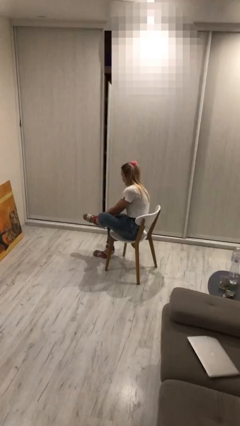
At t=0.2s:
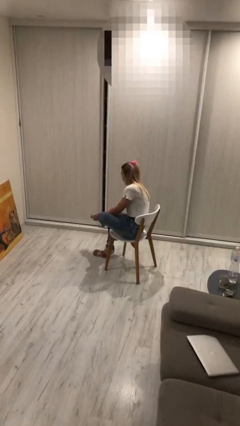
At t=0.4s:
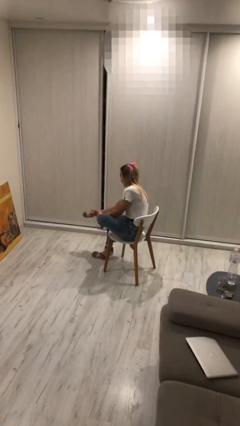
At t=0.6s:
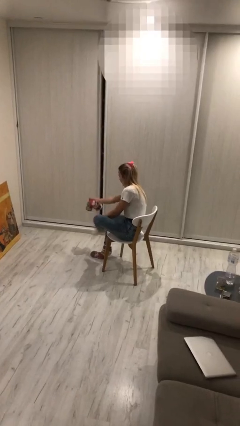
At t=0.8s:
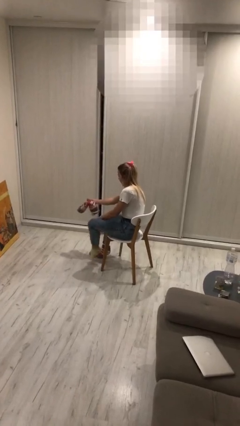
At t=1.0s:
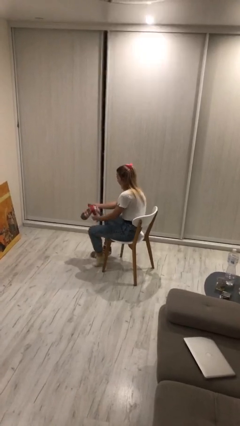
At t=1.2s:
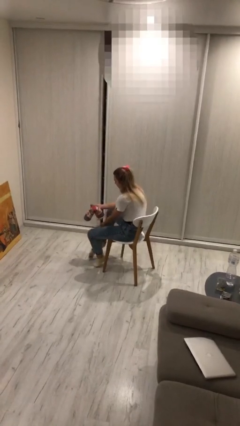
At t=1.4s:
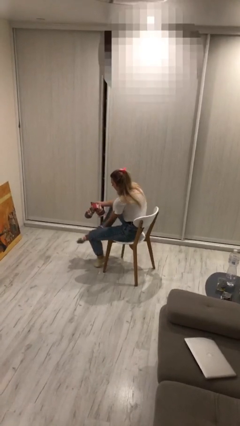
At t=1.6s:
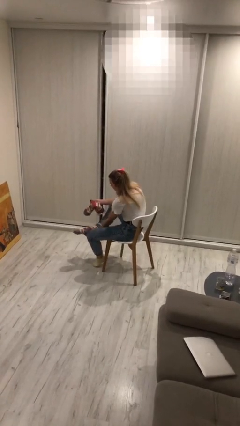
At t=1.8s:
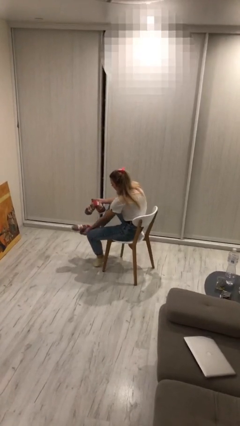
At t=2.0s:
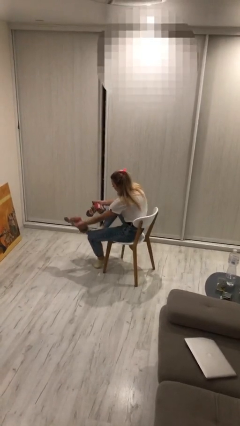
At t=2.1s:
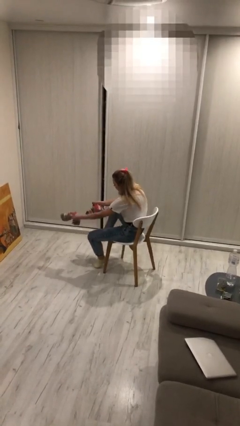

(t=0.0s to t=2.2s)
person takes off socks

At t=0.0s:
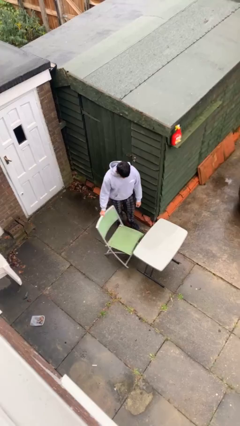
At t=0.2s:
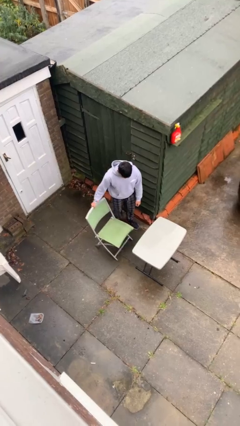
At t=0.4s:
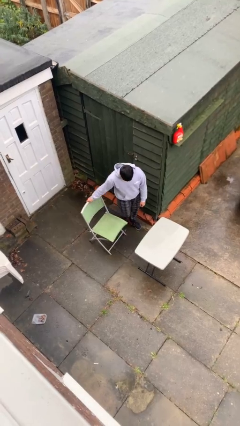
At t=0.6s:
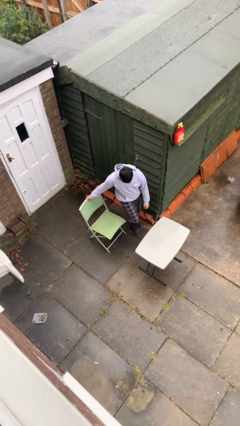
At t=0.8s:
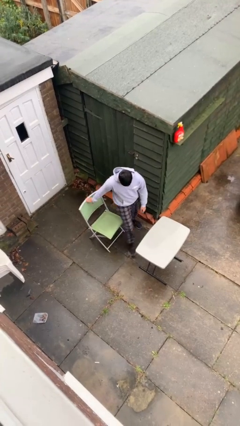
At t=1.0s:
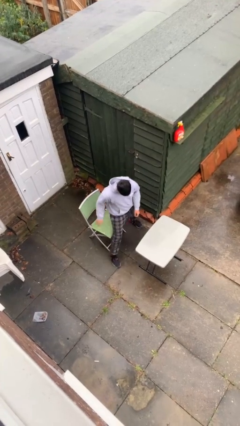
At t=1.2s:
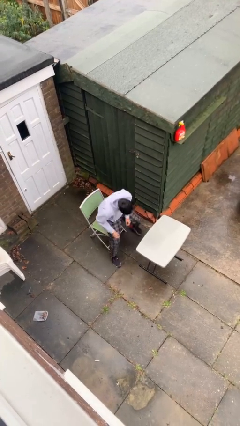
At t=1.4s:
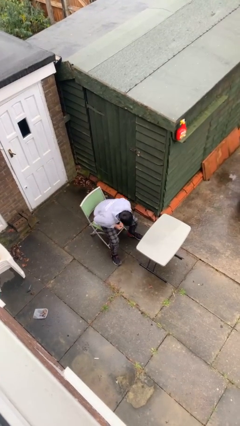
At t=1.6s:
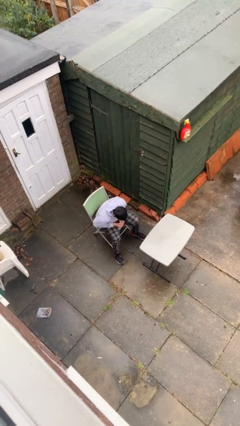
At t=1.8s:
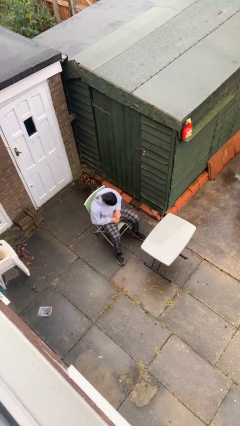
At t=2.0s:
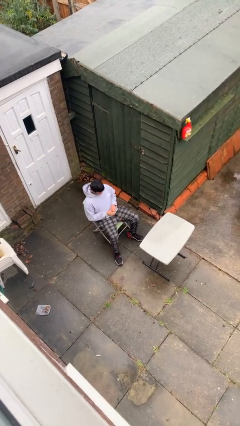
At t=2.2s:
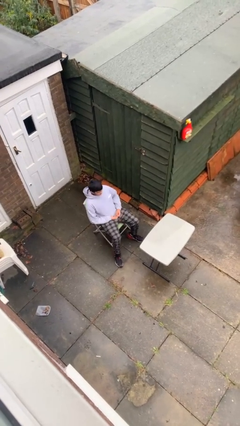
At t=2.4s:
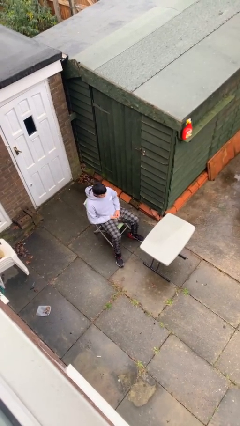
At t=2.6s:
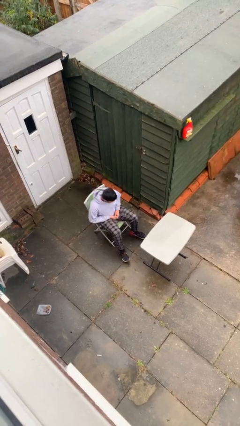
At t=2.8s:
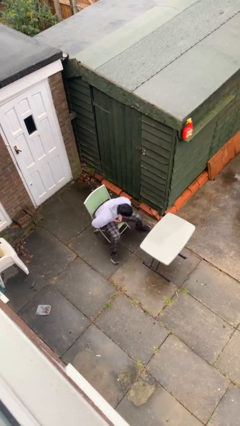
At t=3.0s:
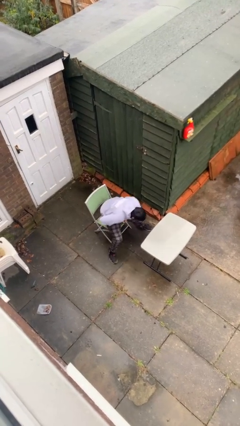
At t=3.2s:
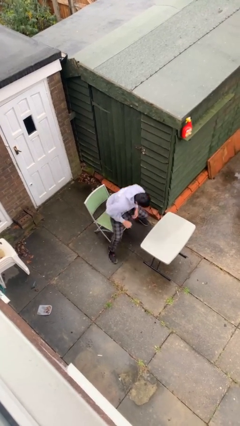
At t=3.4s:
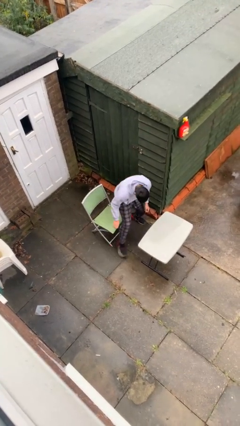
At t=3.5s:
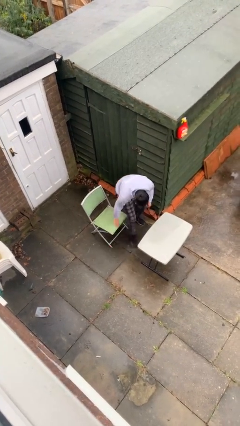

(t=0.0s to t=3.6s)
person sits down

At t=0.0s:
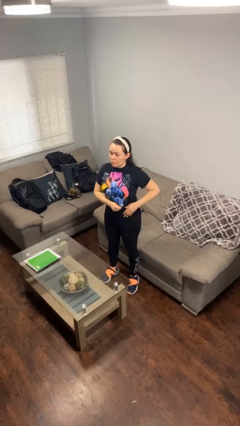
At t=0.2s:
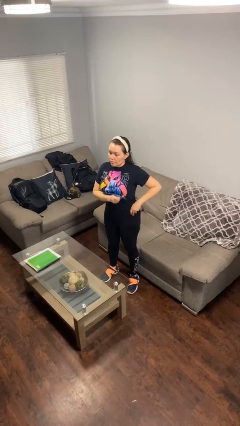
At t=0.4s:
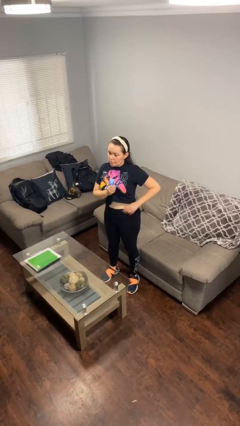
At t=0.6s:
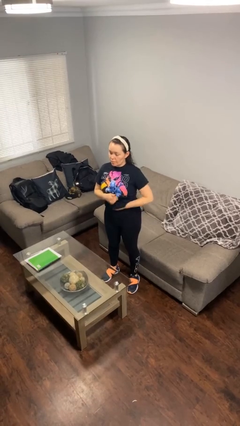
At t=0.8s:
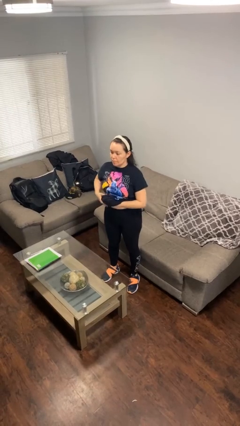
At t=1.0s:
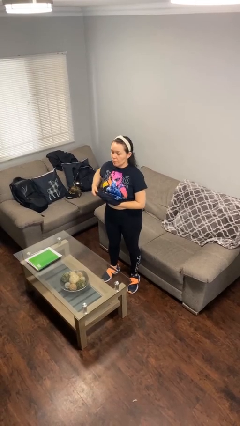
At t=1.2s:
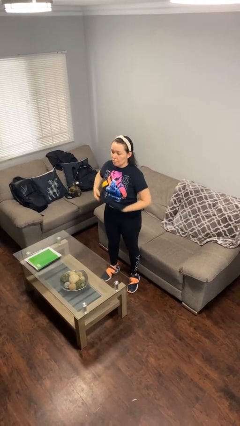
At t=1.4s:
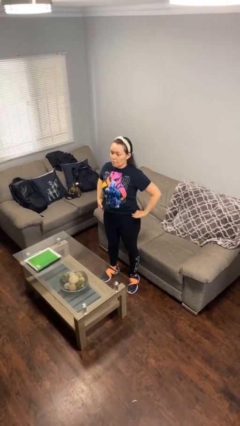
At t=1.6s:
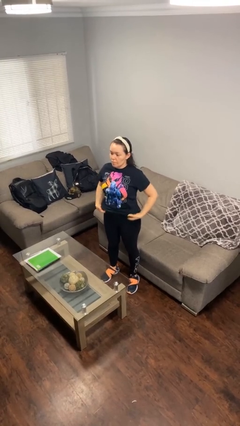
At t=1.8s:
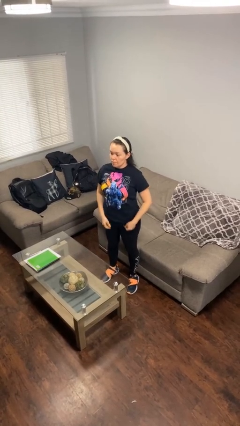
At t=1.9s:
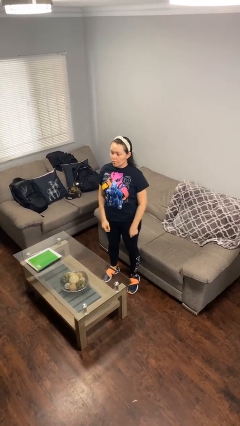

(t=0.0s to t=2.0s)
person untucks shirt

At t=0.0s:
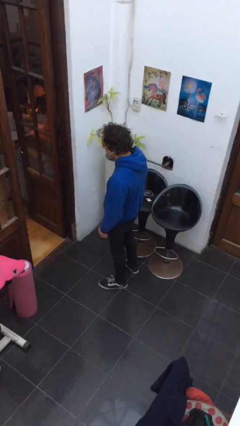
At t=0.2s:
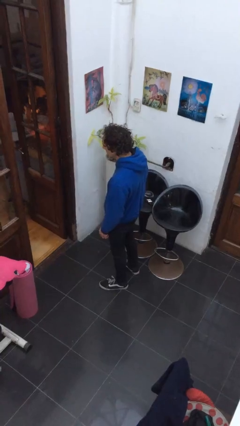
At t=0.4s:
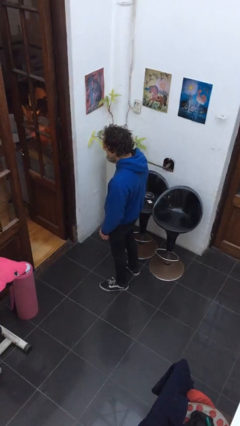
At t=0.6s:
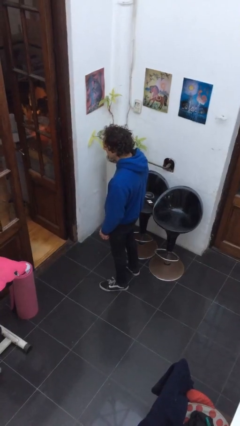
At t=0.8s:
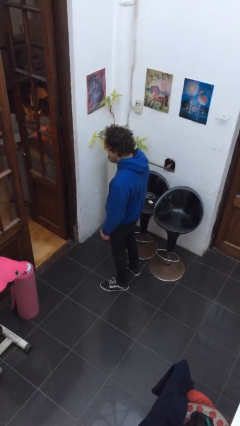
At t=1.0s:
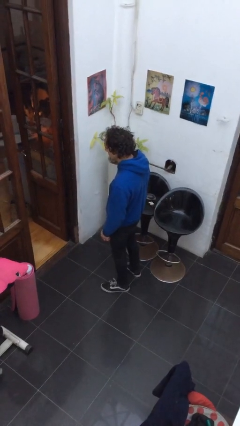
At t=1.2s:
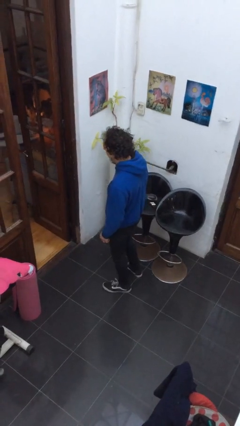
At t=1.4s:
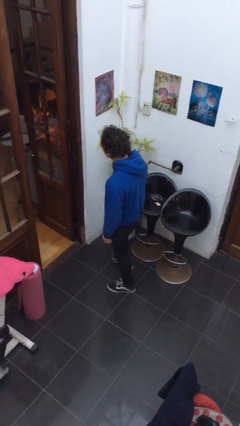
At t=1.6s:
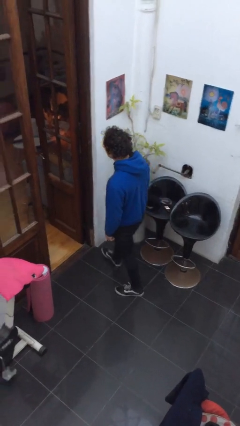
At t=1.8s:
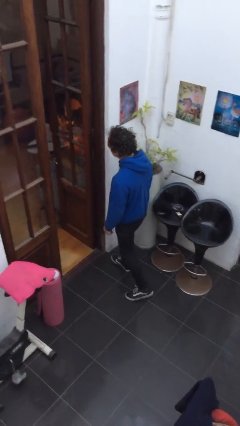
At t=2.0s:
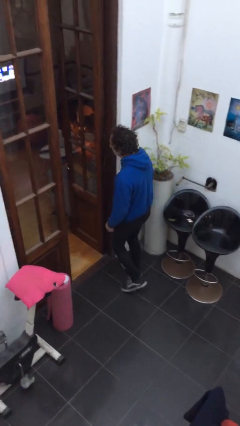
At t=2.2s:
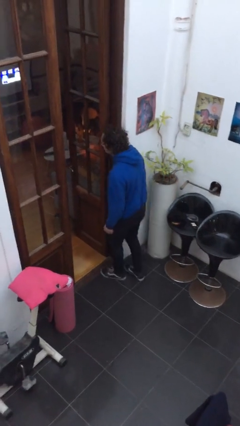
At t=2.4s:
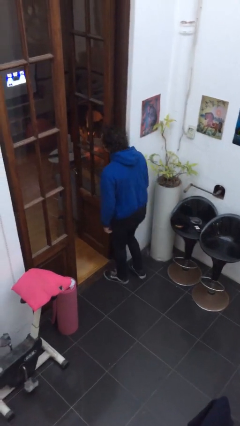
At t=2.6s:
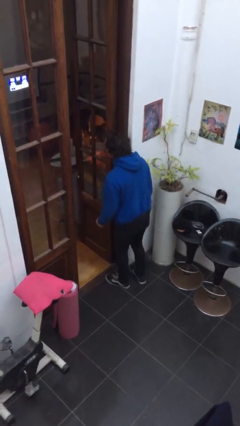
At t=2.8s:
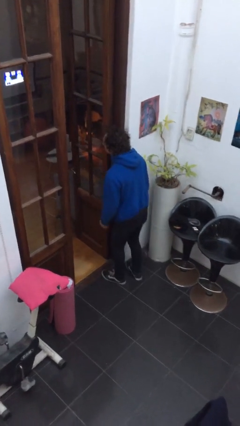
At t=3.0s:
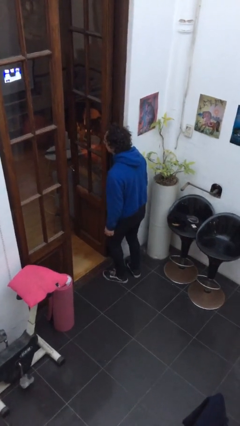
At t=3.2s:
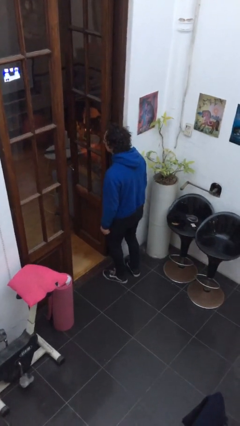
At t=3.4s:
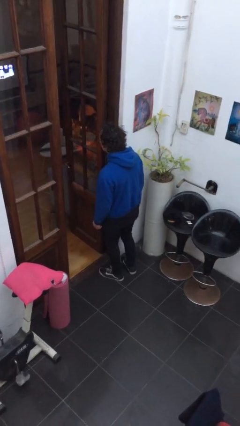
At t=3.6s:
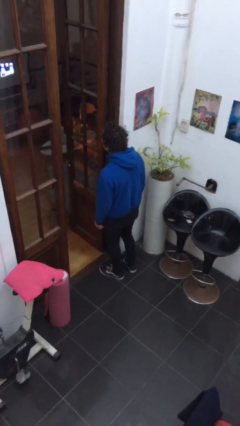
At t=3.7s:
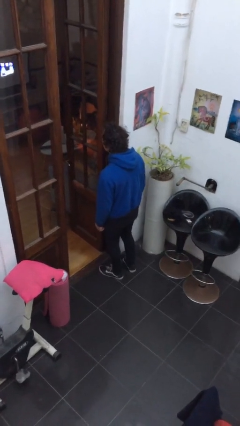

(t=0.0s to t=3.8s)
person bumps into wall

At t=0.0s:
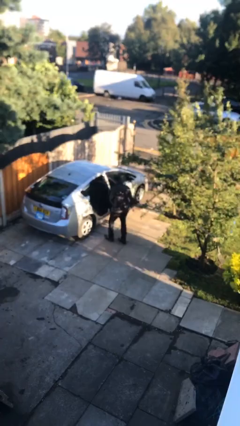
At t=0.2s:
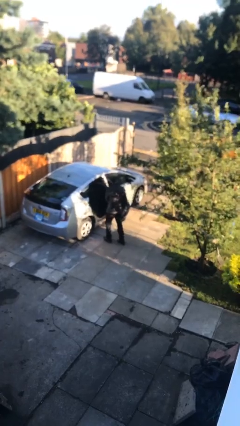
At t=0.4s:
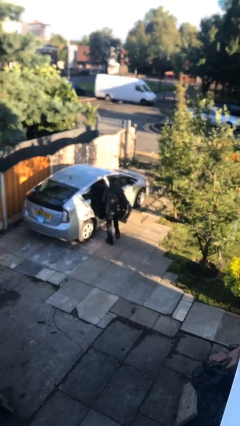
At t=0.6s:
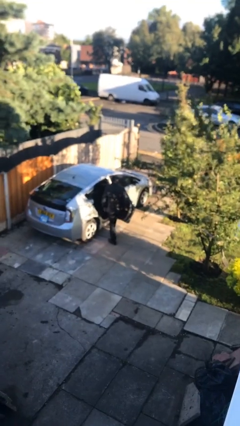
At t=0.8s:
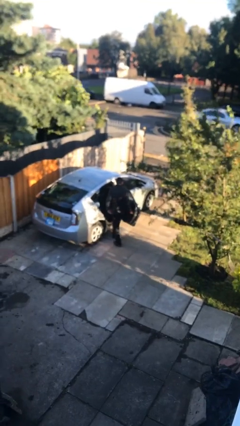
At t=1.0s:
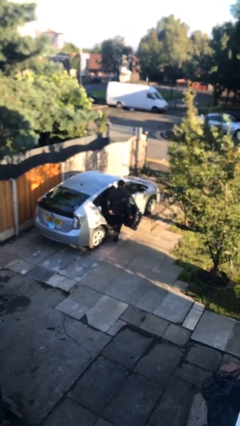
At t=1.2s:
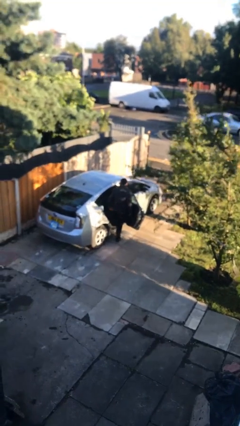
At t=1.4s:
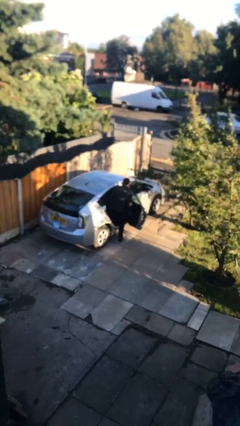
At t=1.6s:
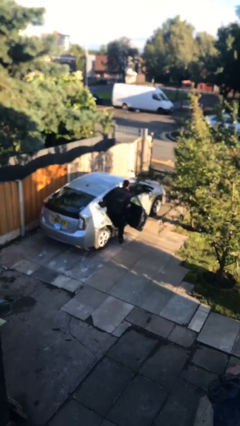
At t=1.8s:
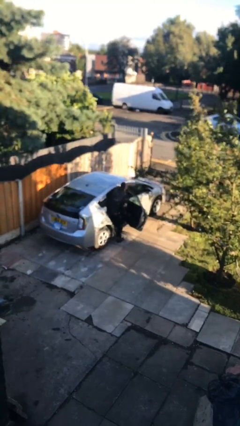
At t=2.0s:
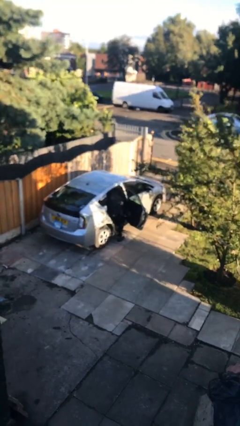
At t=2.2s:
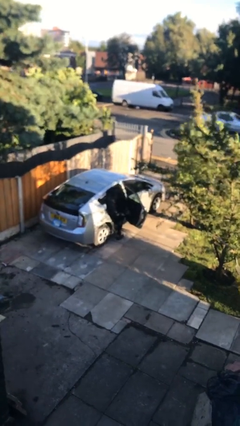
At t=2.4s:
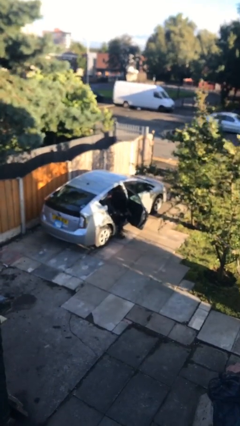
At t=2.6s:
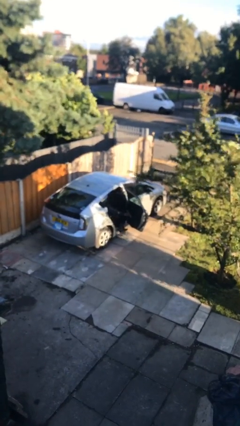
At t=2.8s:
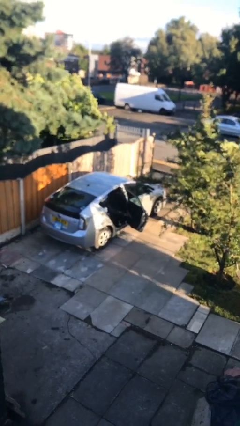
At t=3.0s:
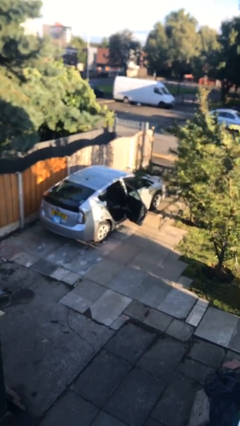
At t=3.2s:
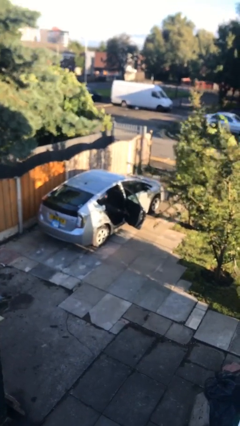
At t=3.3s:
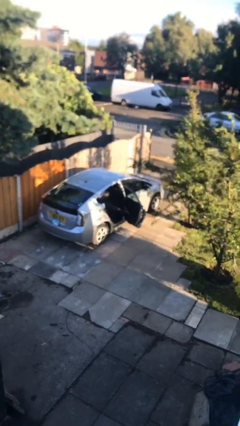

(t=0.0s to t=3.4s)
person enters car

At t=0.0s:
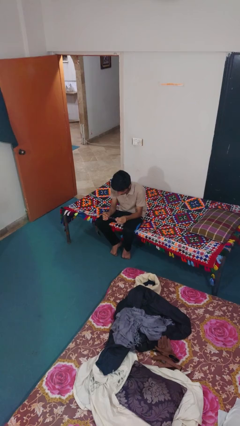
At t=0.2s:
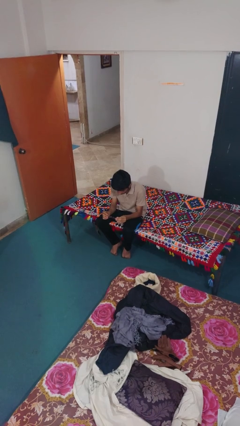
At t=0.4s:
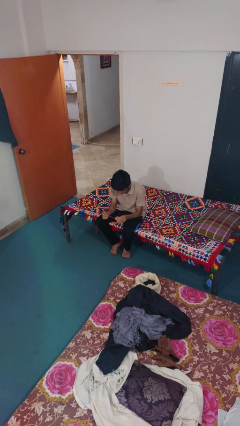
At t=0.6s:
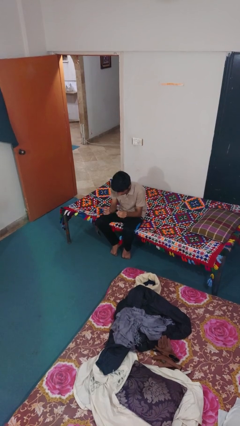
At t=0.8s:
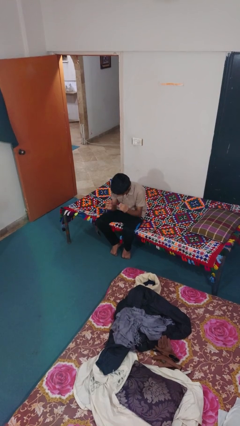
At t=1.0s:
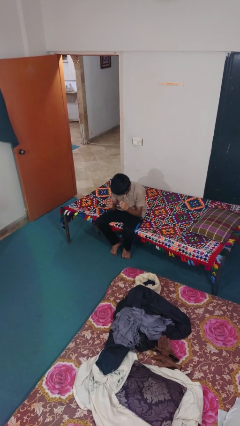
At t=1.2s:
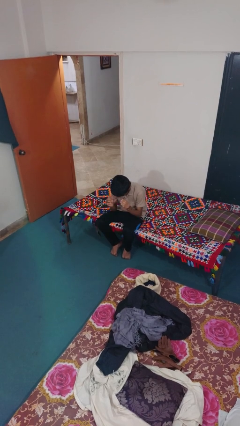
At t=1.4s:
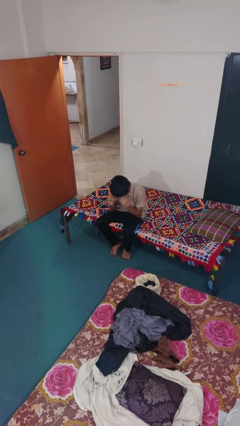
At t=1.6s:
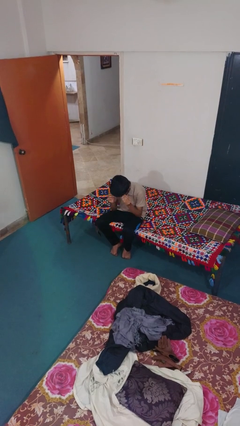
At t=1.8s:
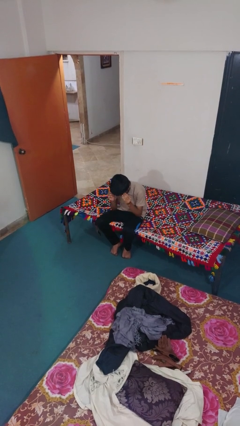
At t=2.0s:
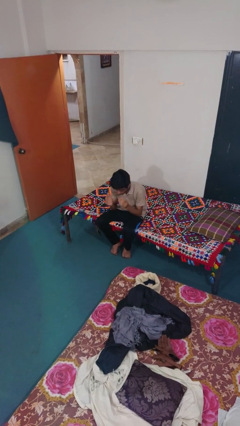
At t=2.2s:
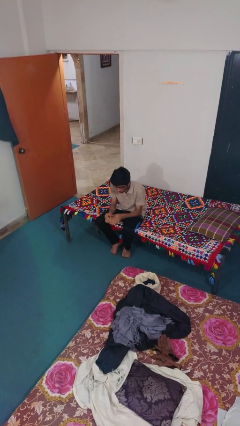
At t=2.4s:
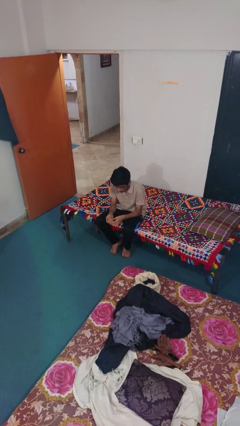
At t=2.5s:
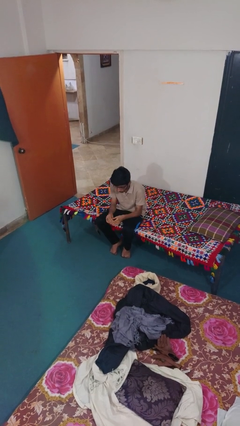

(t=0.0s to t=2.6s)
person puts on glasses
